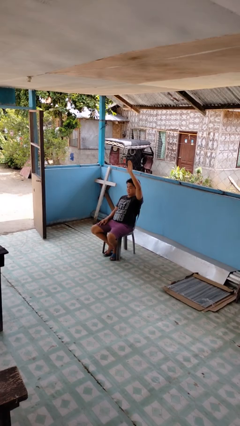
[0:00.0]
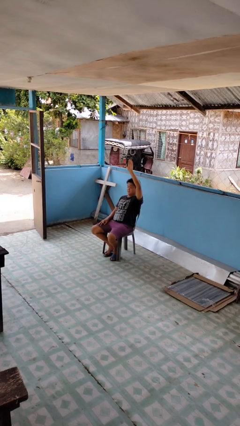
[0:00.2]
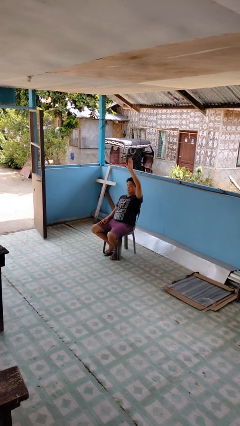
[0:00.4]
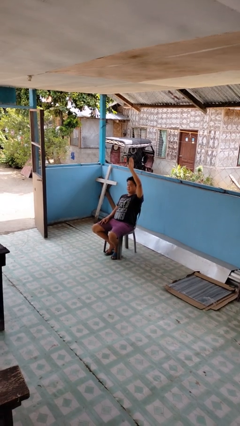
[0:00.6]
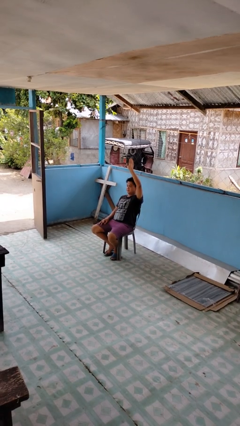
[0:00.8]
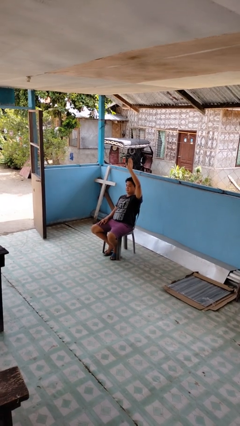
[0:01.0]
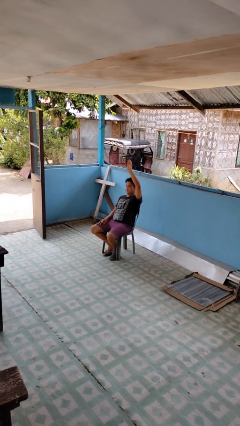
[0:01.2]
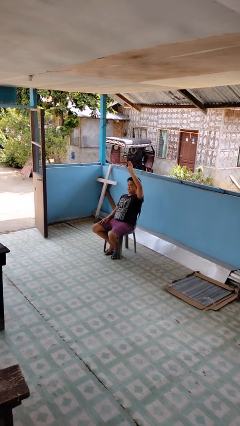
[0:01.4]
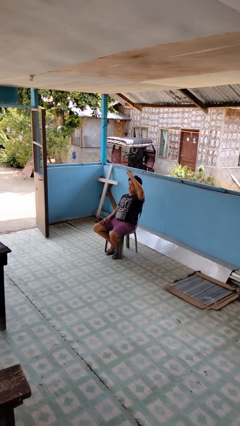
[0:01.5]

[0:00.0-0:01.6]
person gestures raise hand

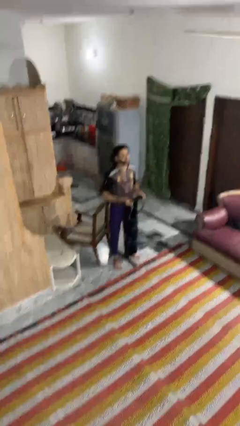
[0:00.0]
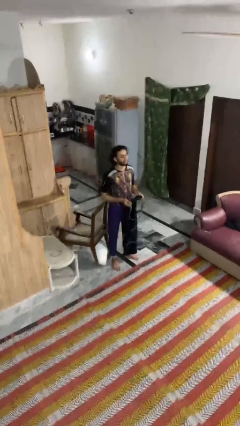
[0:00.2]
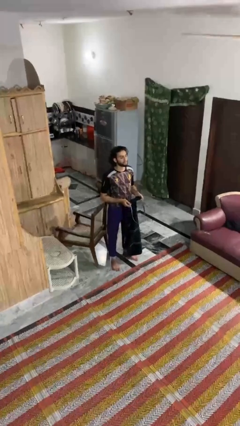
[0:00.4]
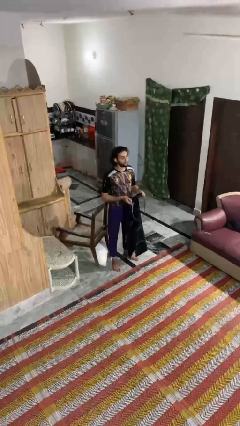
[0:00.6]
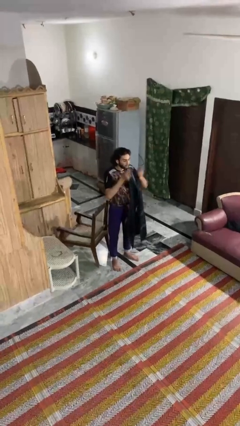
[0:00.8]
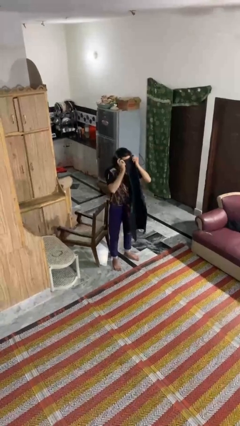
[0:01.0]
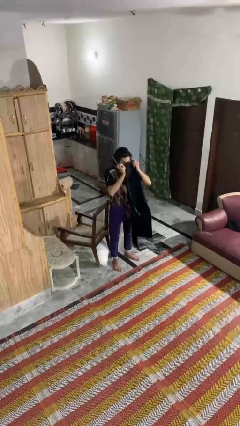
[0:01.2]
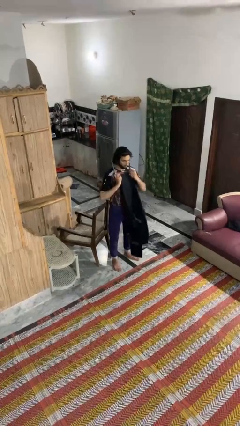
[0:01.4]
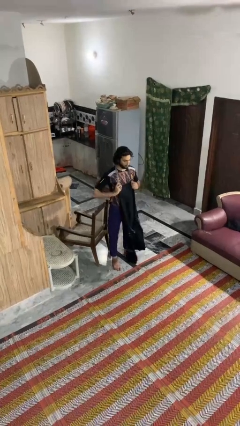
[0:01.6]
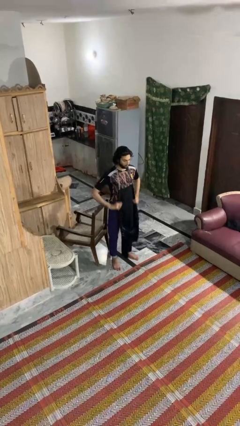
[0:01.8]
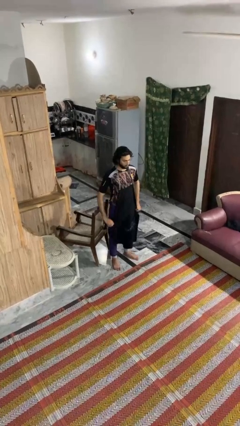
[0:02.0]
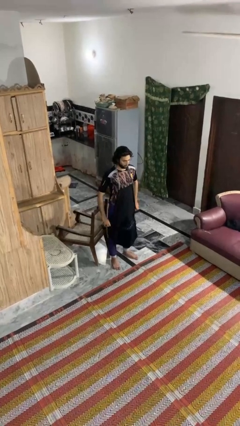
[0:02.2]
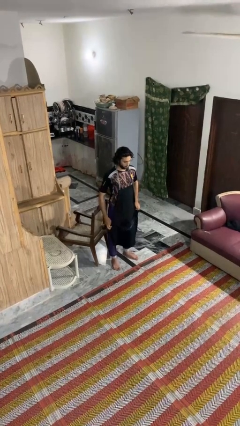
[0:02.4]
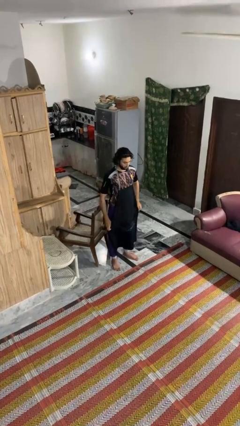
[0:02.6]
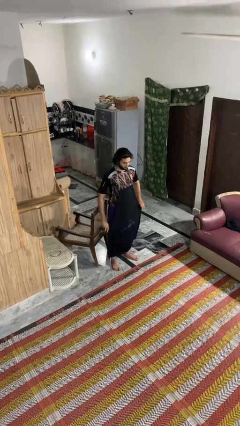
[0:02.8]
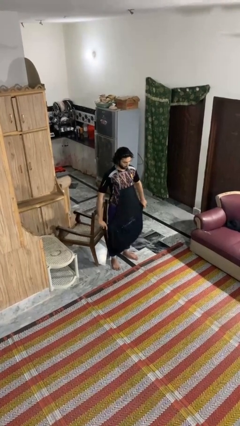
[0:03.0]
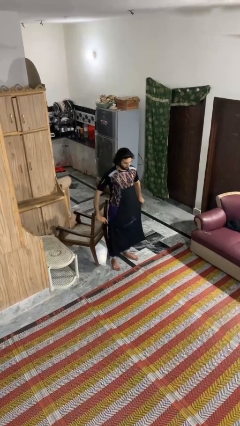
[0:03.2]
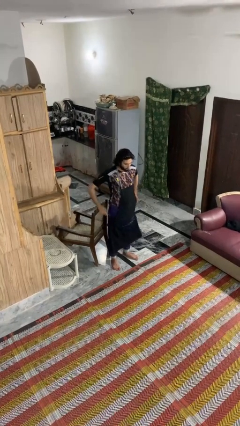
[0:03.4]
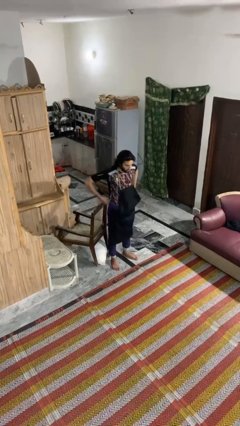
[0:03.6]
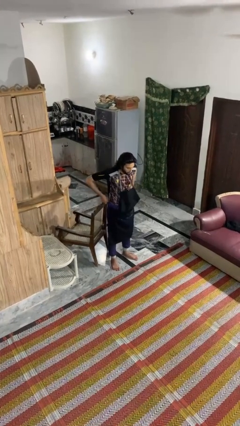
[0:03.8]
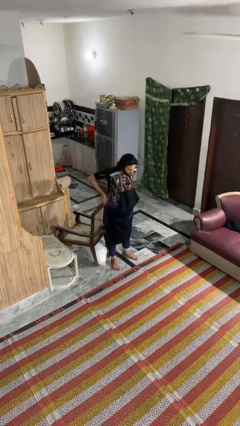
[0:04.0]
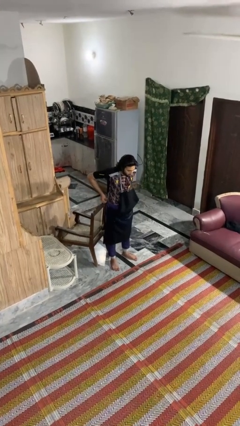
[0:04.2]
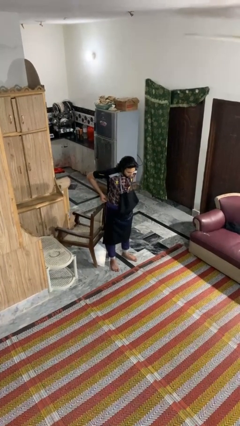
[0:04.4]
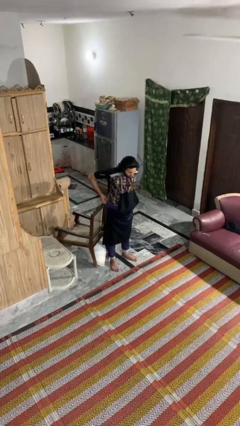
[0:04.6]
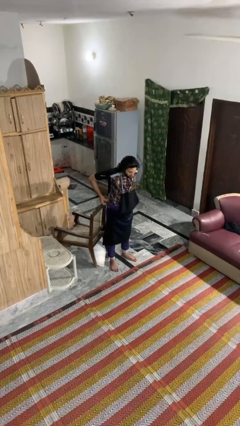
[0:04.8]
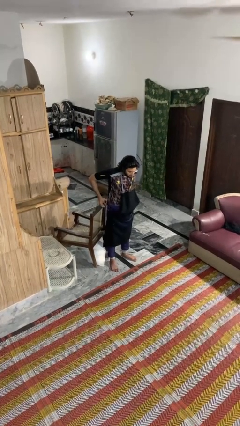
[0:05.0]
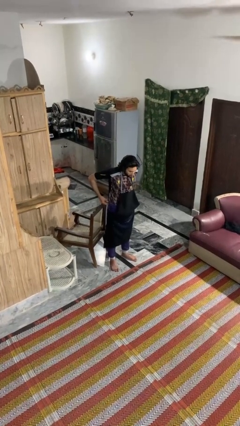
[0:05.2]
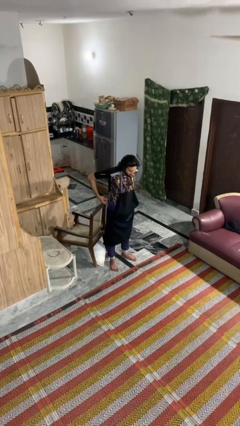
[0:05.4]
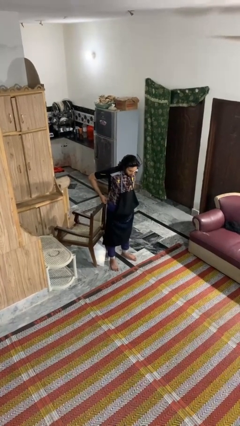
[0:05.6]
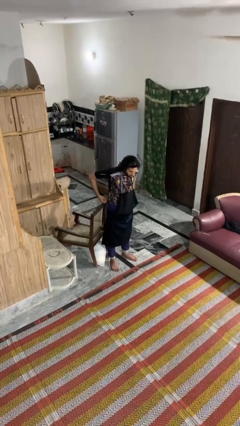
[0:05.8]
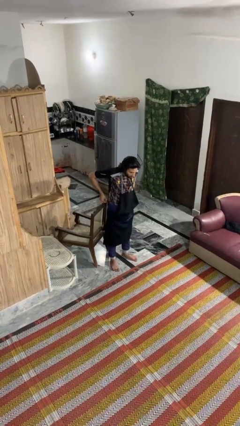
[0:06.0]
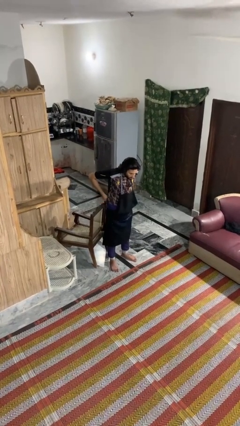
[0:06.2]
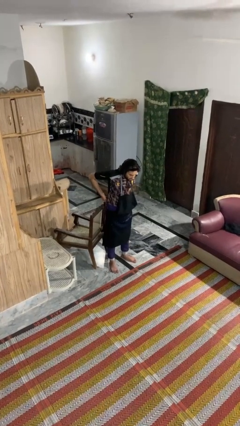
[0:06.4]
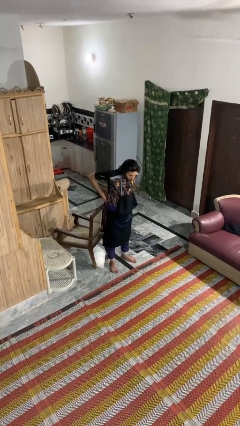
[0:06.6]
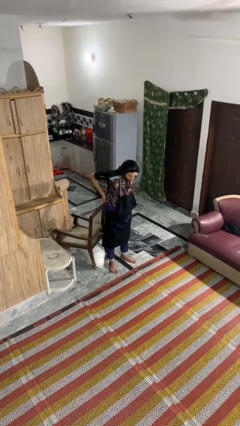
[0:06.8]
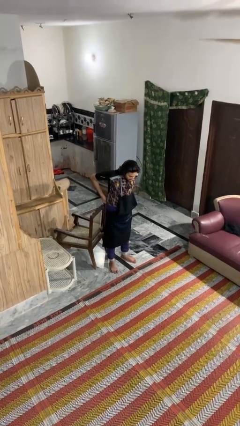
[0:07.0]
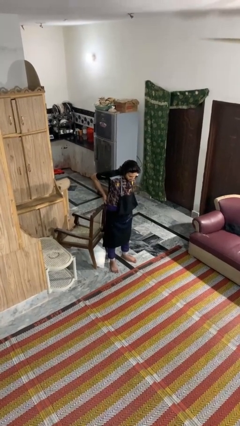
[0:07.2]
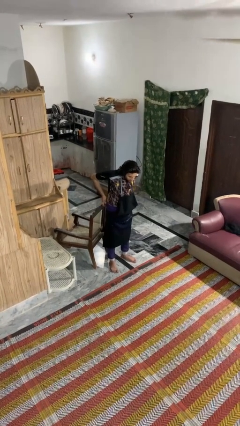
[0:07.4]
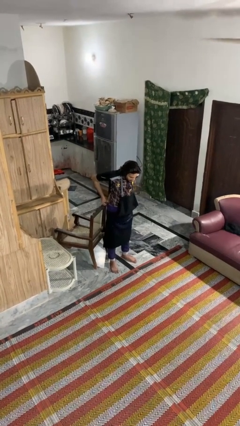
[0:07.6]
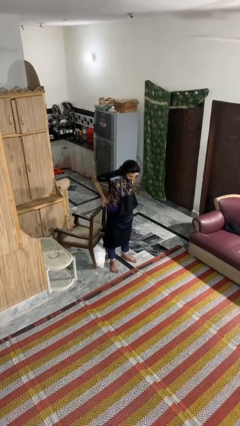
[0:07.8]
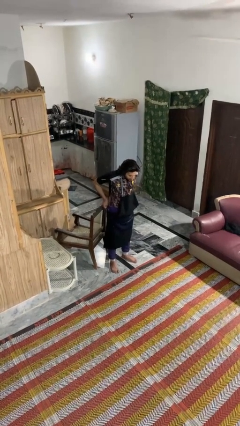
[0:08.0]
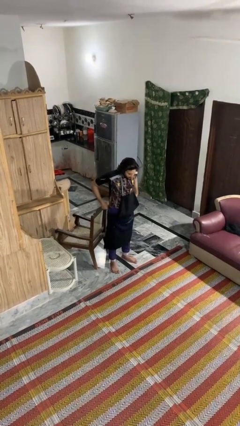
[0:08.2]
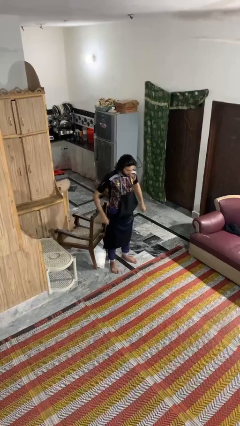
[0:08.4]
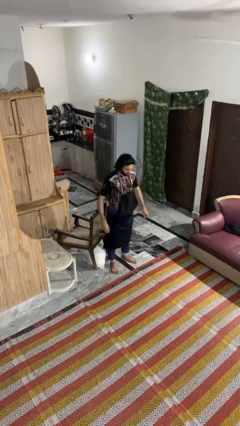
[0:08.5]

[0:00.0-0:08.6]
person puts on apron

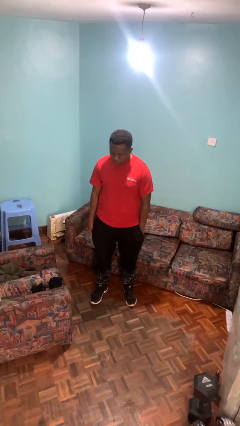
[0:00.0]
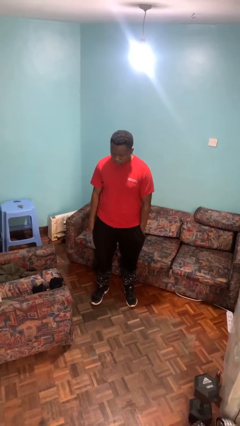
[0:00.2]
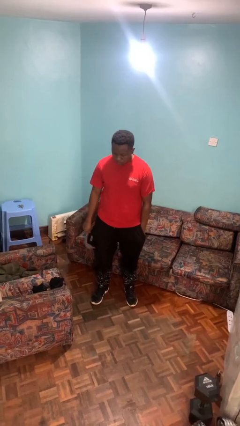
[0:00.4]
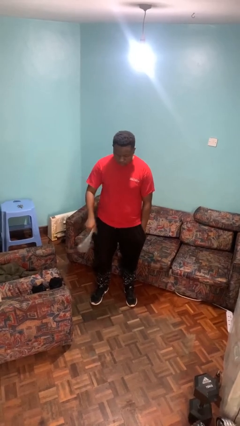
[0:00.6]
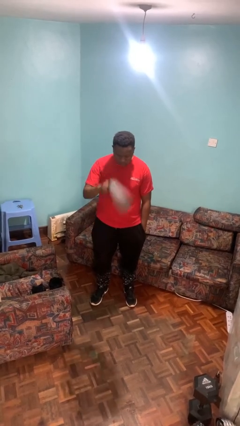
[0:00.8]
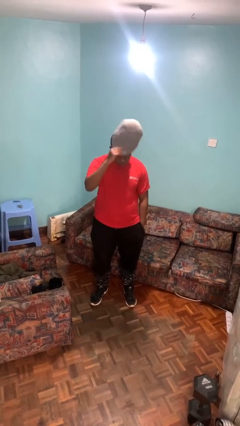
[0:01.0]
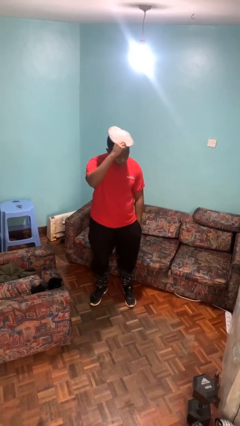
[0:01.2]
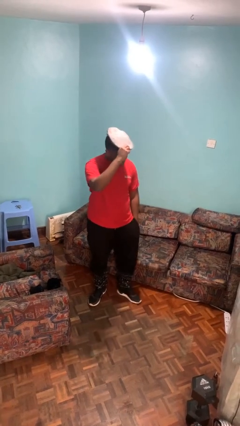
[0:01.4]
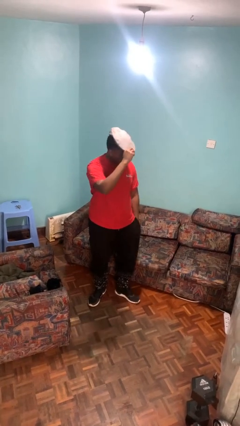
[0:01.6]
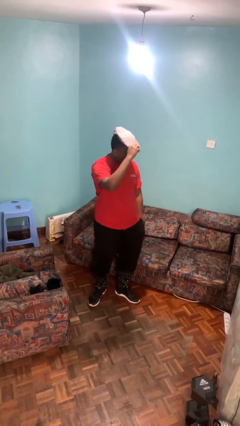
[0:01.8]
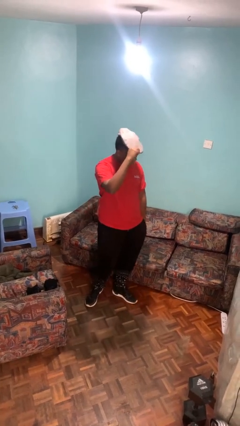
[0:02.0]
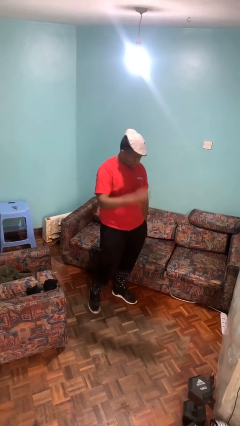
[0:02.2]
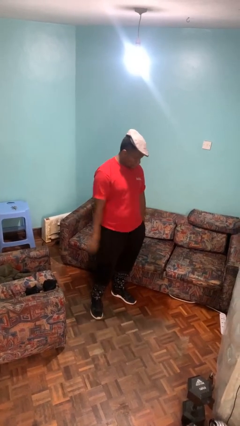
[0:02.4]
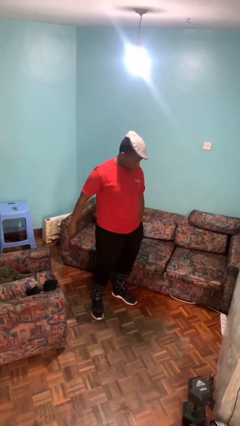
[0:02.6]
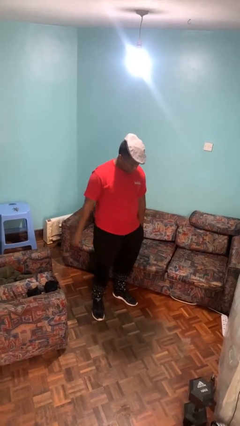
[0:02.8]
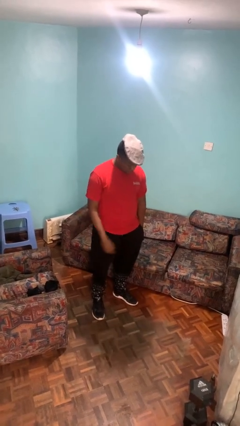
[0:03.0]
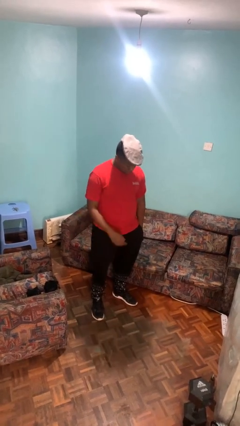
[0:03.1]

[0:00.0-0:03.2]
person puts on hat

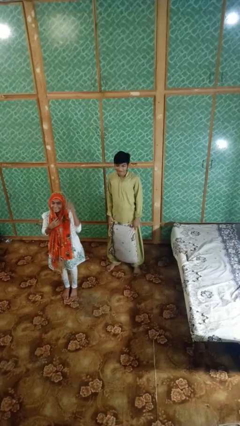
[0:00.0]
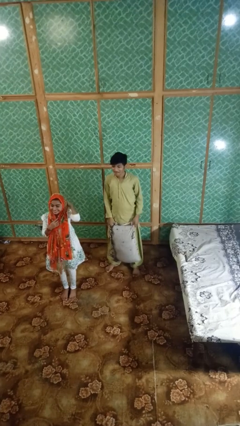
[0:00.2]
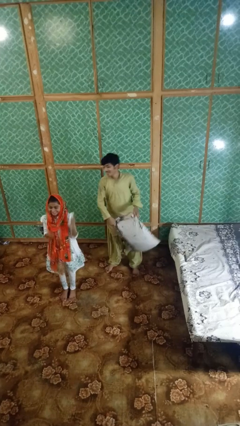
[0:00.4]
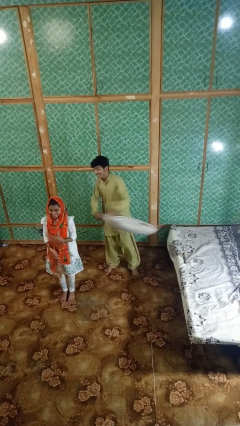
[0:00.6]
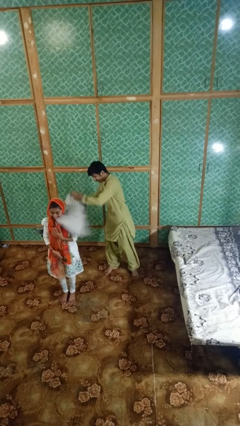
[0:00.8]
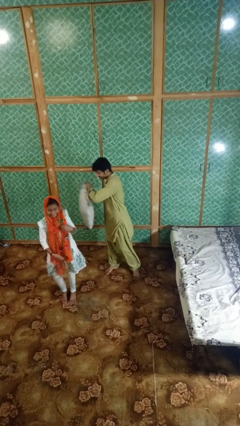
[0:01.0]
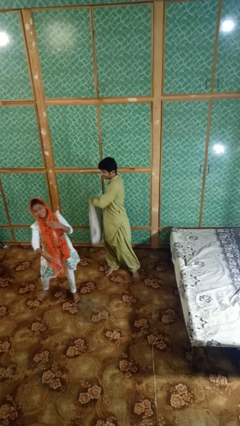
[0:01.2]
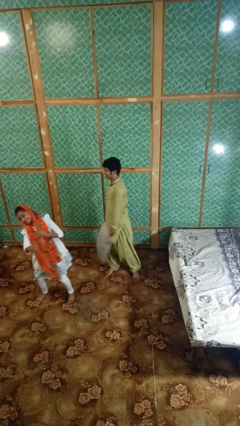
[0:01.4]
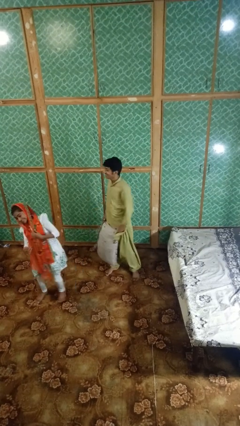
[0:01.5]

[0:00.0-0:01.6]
person hits person with pillow

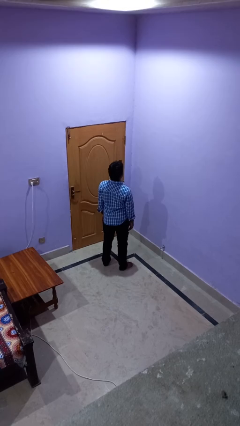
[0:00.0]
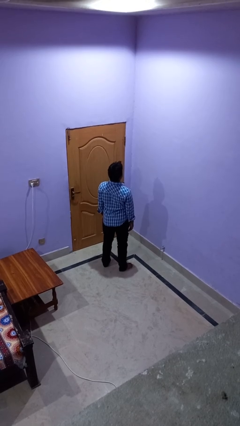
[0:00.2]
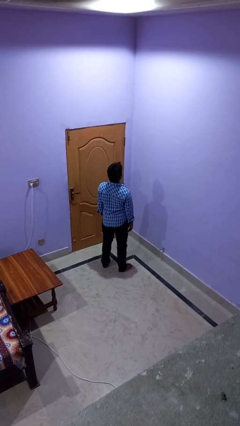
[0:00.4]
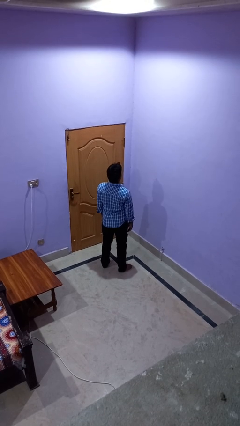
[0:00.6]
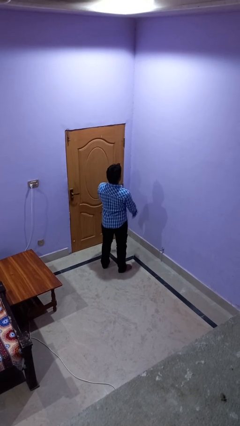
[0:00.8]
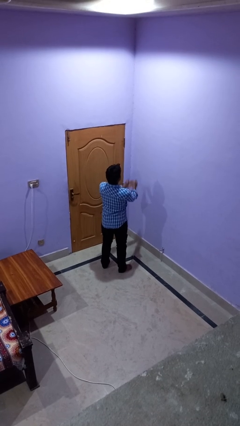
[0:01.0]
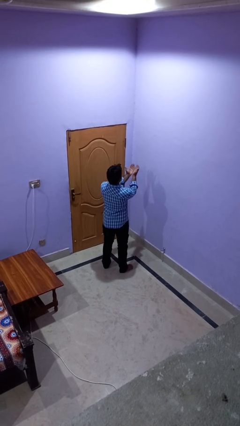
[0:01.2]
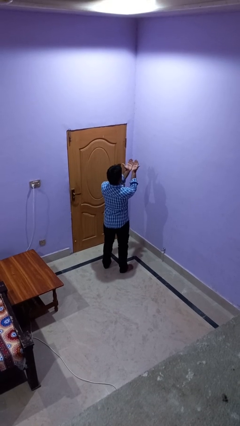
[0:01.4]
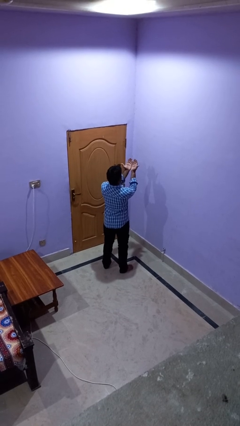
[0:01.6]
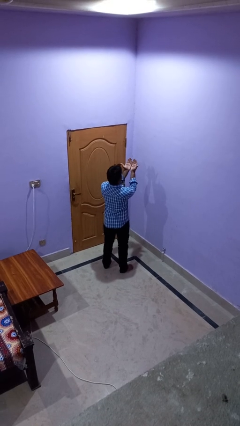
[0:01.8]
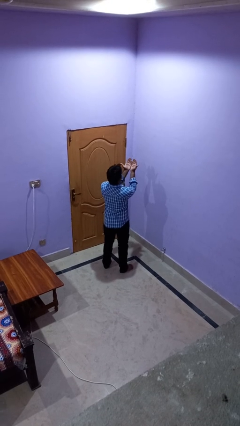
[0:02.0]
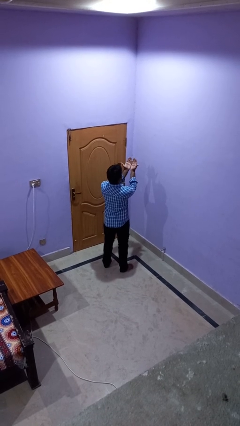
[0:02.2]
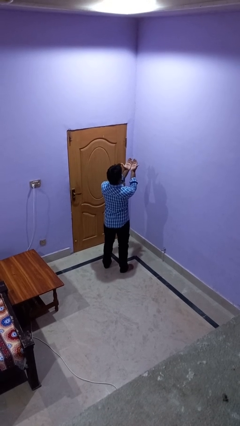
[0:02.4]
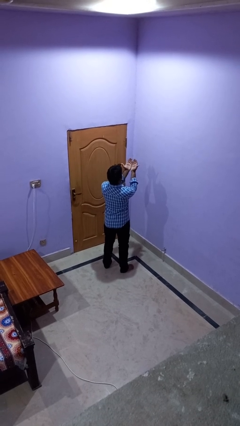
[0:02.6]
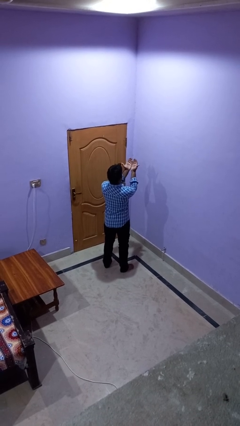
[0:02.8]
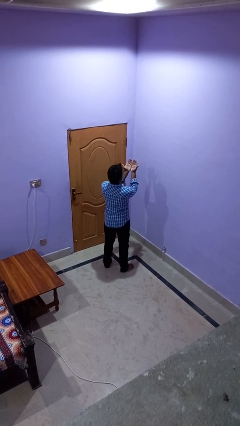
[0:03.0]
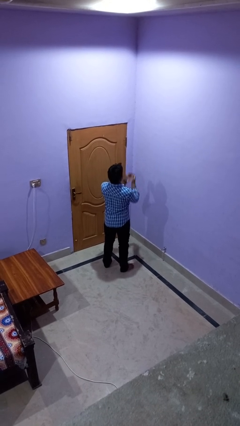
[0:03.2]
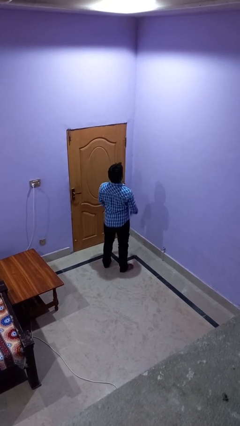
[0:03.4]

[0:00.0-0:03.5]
person prays
